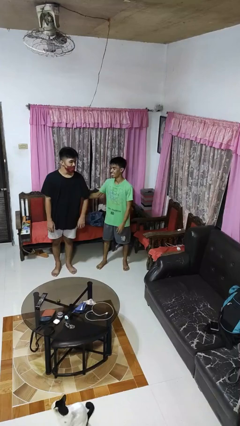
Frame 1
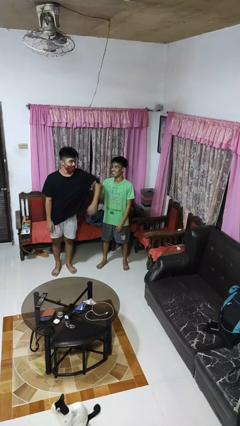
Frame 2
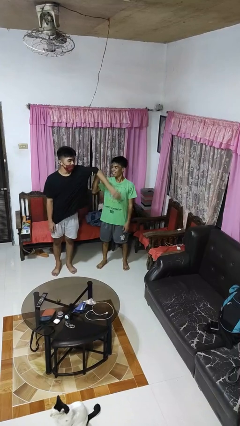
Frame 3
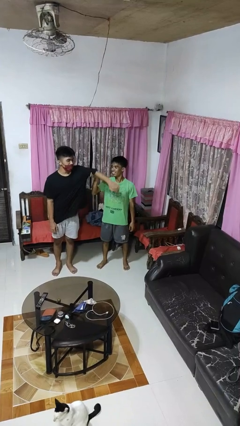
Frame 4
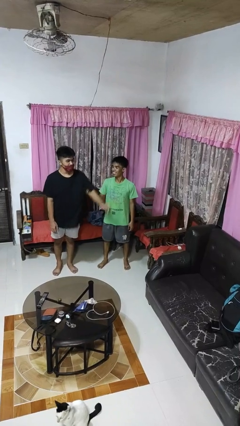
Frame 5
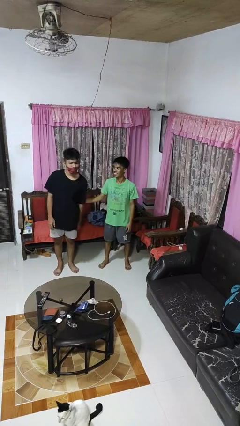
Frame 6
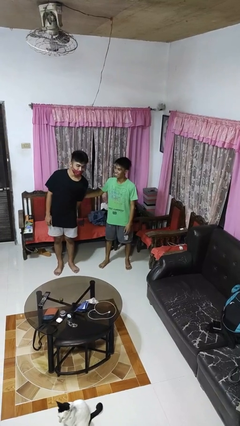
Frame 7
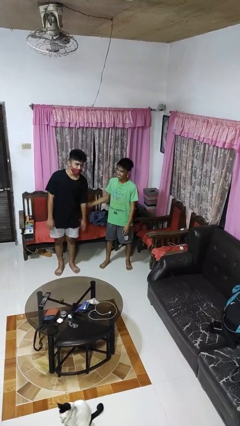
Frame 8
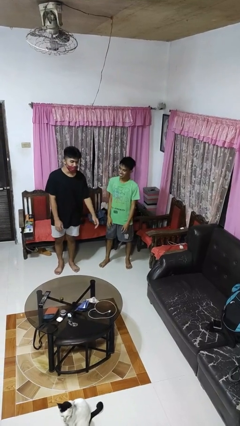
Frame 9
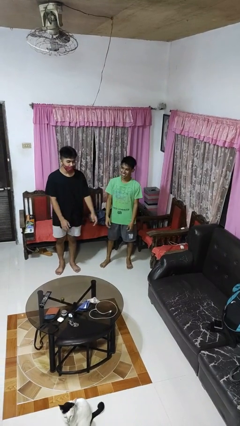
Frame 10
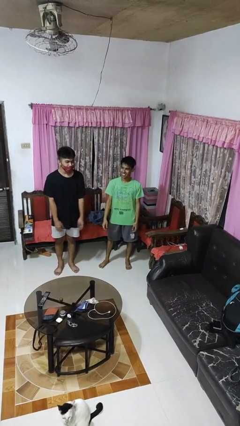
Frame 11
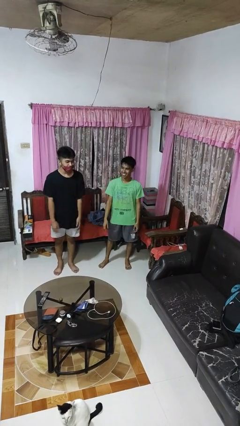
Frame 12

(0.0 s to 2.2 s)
person grabs person by bicep

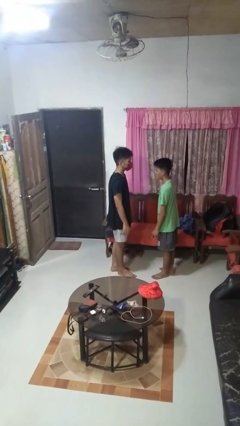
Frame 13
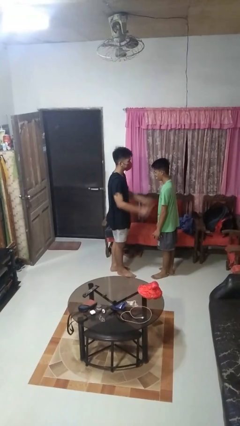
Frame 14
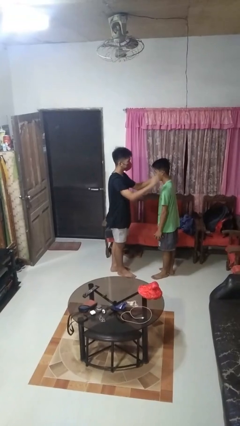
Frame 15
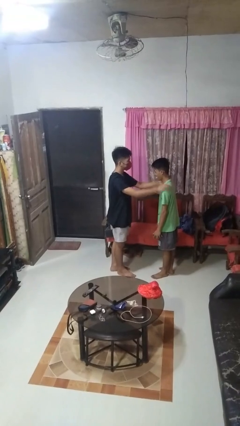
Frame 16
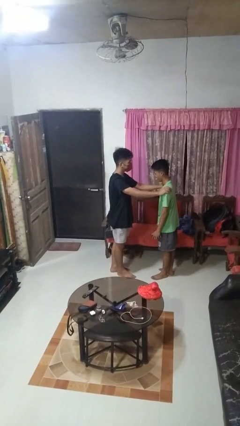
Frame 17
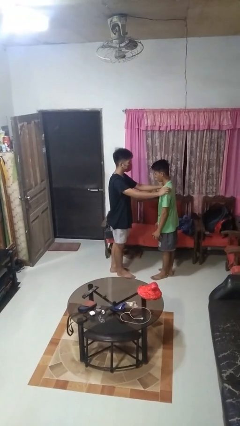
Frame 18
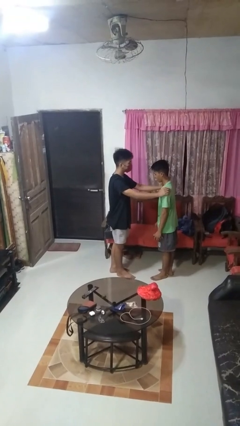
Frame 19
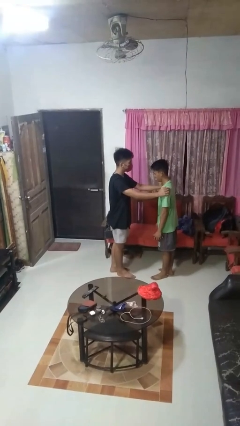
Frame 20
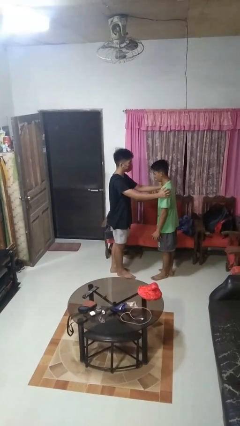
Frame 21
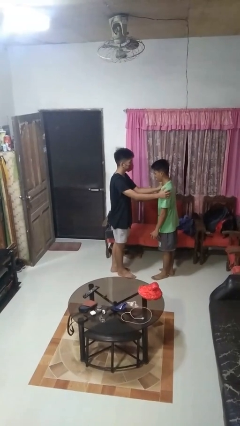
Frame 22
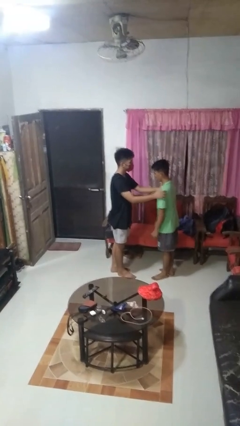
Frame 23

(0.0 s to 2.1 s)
person grabs person by shoulder

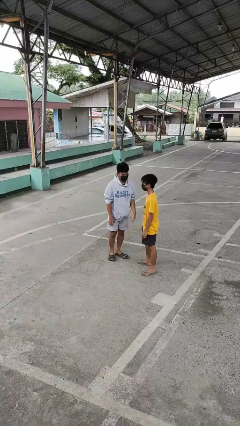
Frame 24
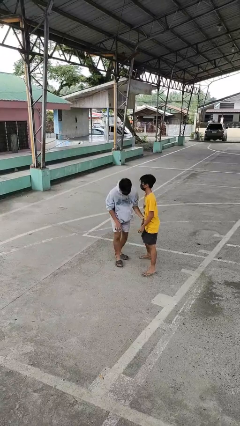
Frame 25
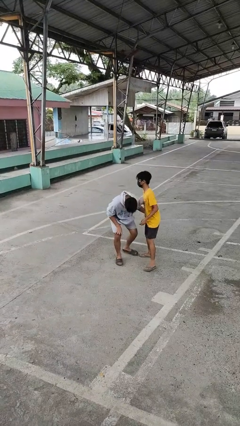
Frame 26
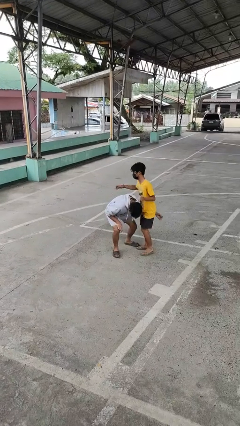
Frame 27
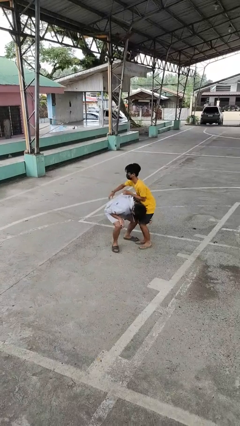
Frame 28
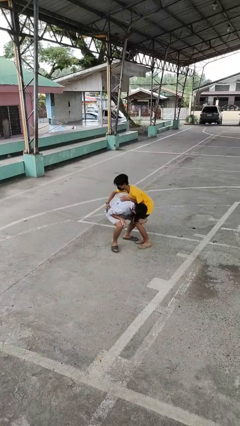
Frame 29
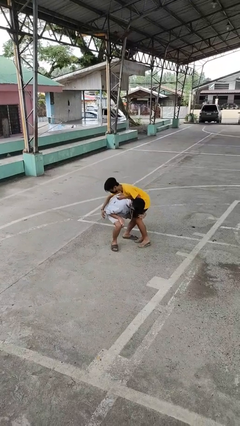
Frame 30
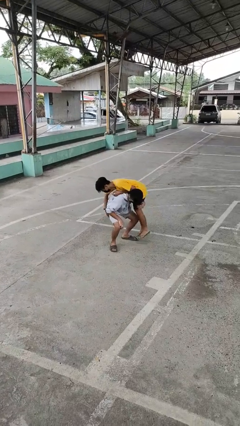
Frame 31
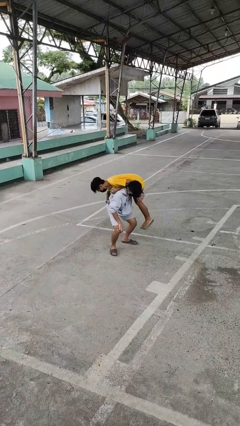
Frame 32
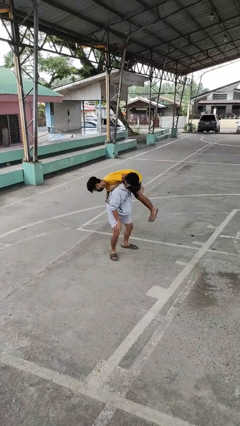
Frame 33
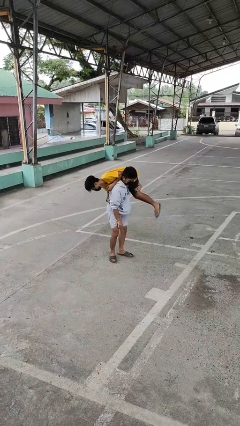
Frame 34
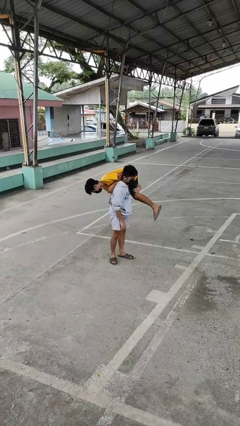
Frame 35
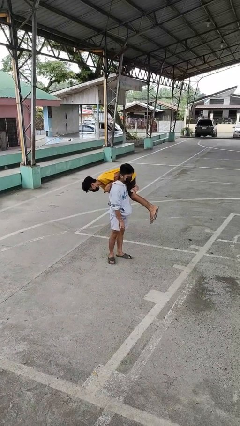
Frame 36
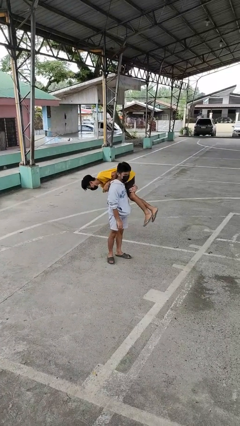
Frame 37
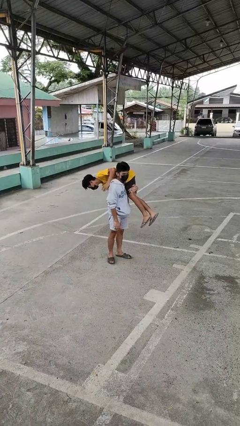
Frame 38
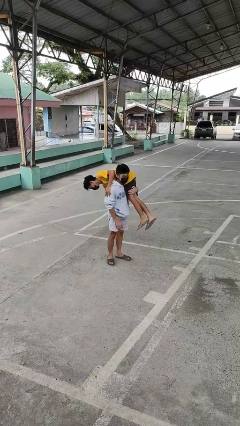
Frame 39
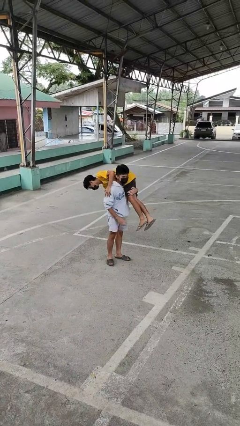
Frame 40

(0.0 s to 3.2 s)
person carries person over shoulder

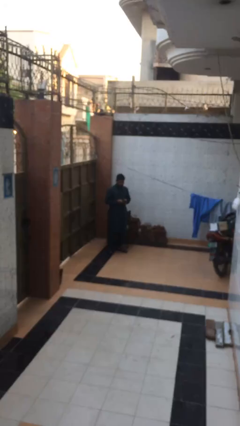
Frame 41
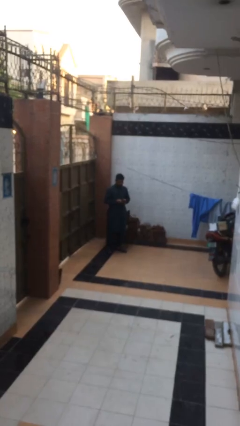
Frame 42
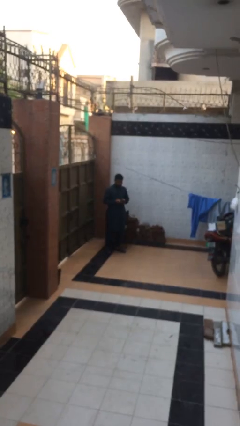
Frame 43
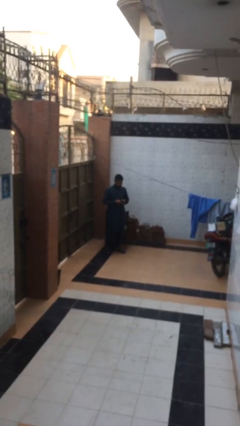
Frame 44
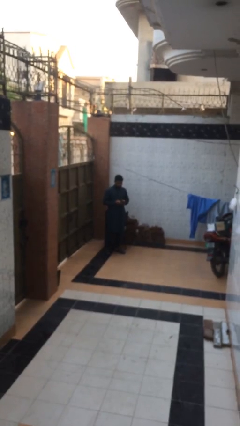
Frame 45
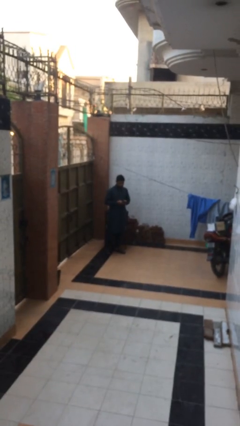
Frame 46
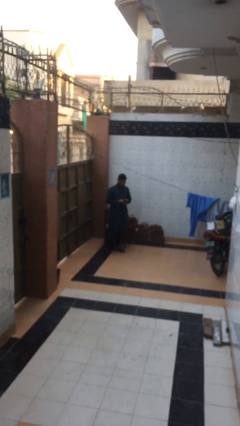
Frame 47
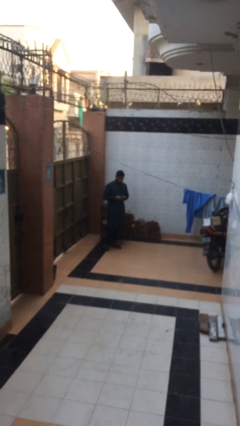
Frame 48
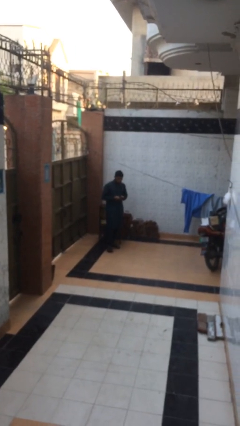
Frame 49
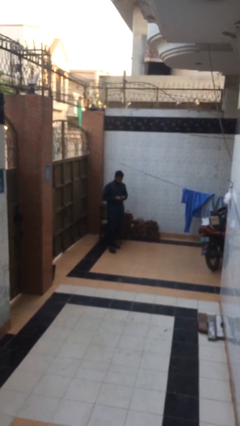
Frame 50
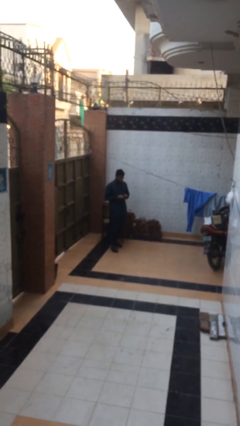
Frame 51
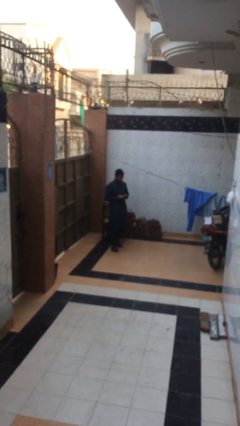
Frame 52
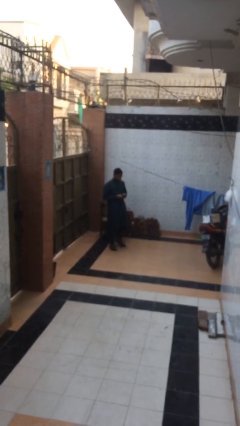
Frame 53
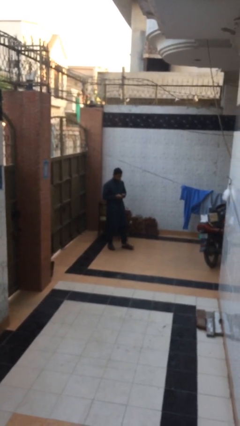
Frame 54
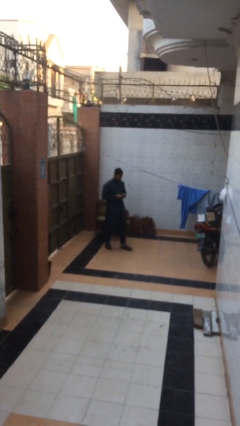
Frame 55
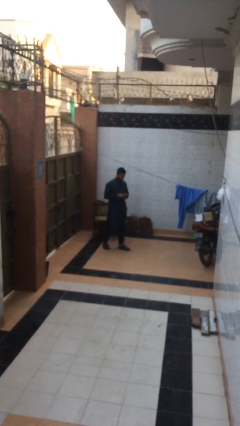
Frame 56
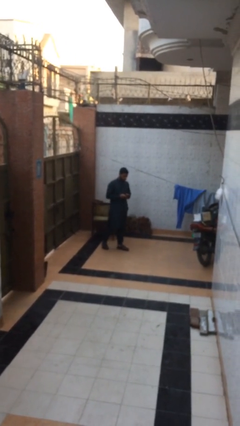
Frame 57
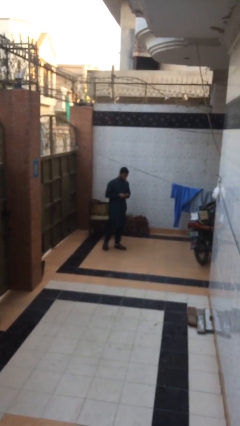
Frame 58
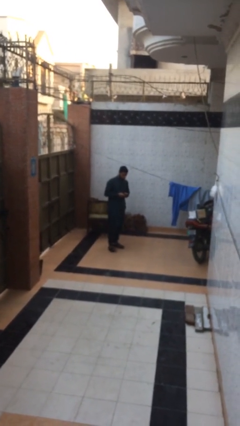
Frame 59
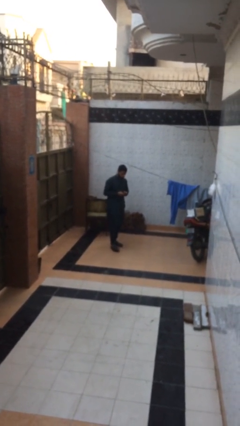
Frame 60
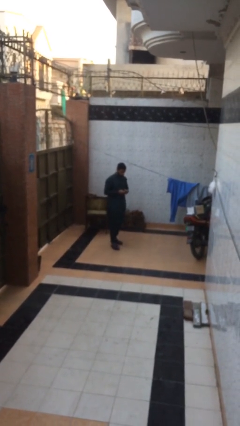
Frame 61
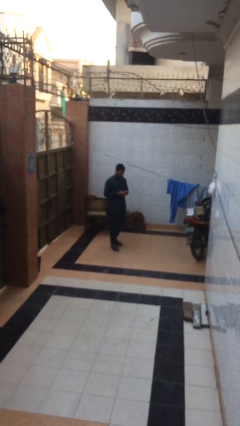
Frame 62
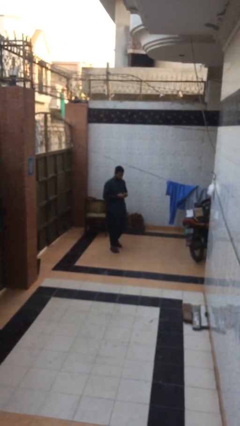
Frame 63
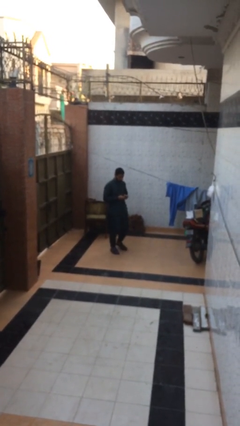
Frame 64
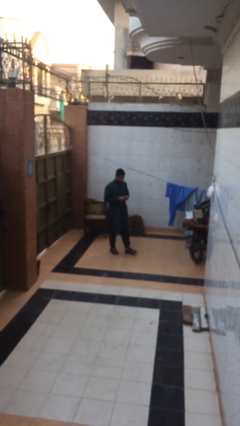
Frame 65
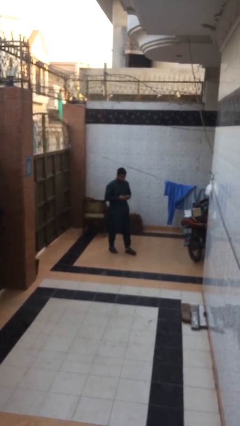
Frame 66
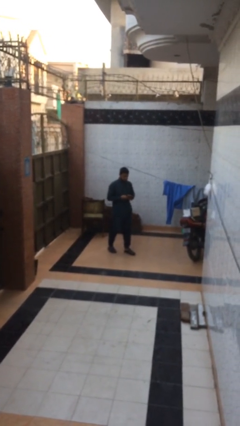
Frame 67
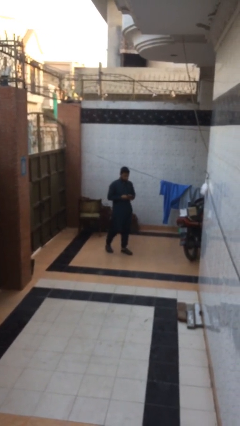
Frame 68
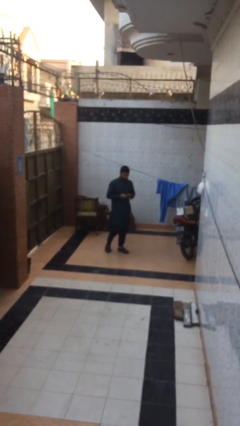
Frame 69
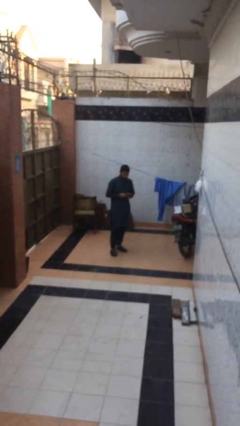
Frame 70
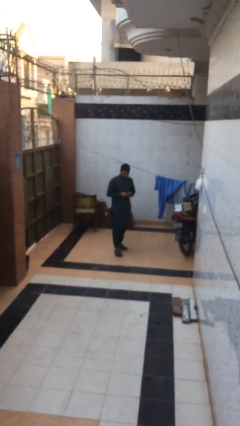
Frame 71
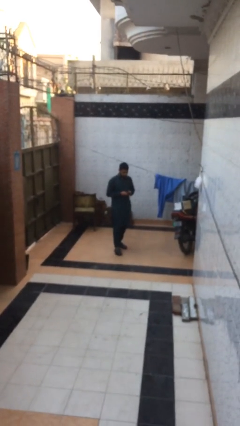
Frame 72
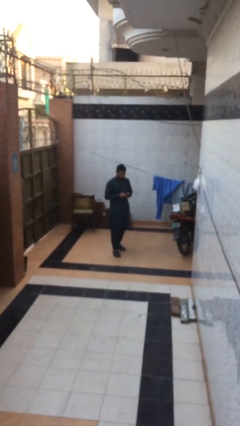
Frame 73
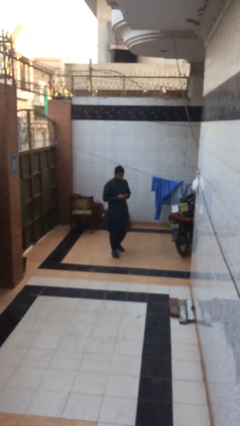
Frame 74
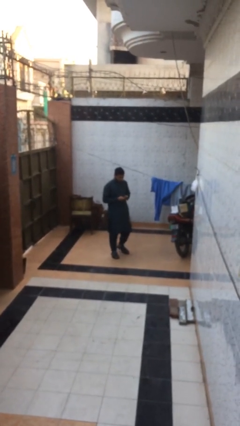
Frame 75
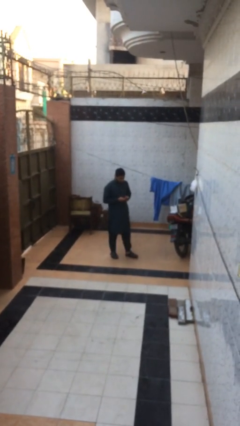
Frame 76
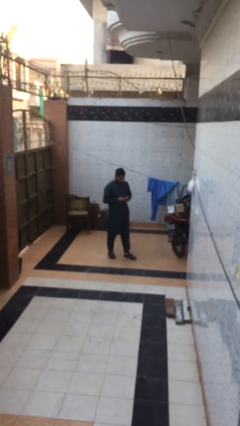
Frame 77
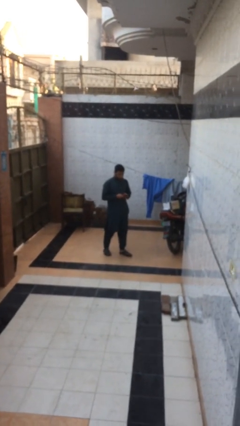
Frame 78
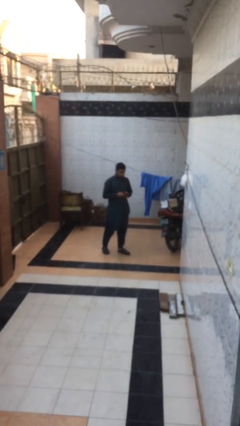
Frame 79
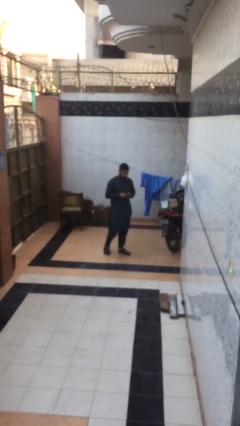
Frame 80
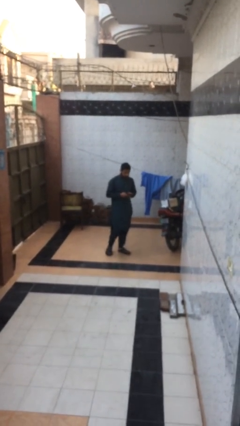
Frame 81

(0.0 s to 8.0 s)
person texts on phone

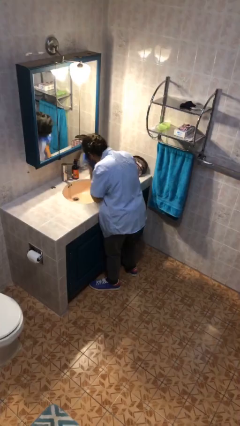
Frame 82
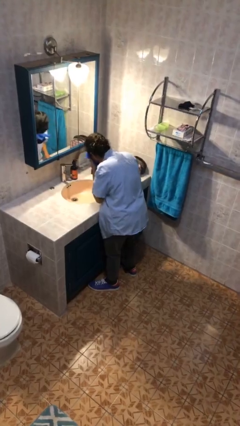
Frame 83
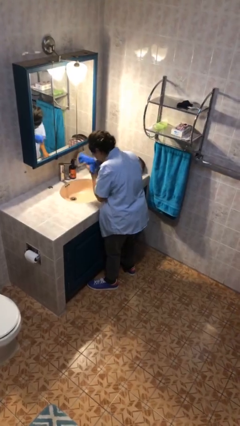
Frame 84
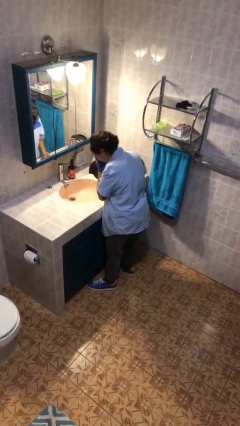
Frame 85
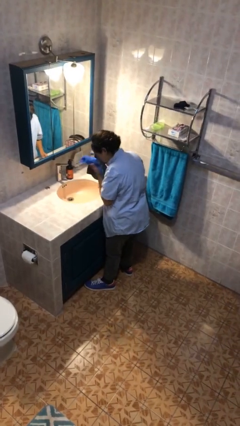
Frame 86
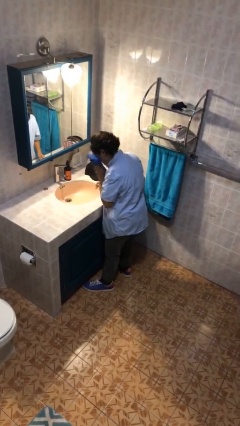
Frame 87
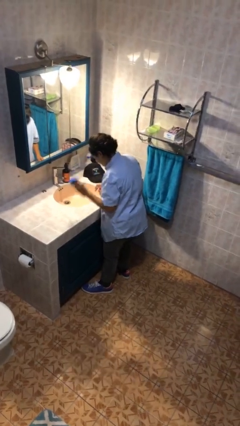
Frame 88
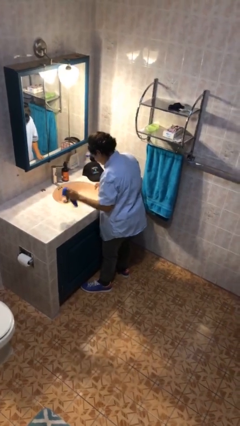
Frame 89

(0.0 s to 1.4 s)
person dries face with towel

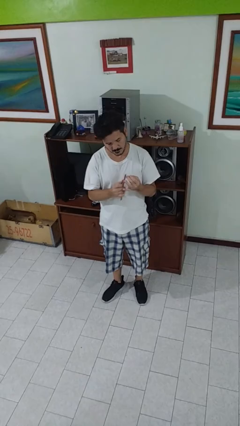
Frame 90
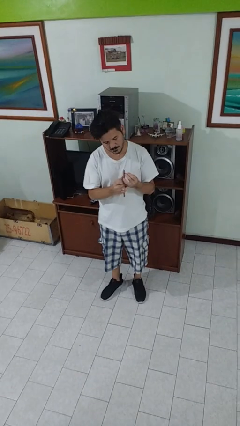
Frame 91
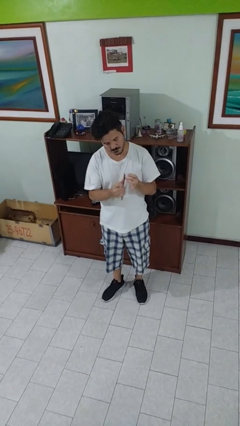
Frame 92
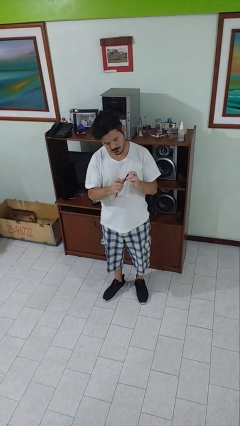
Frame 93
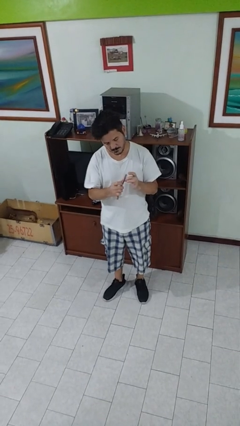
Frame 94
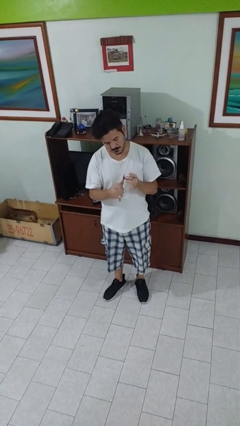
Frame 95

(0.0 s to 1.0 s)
person files fingernails
